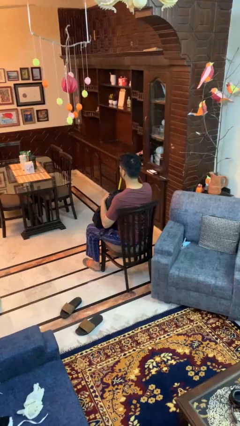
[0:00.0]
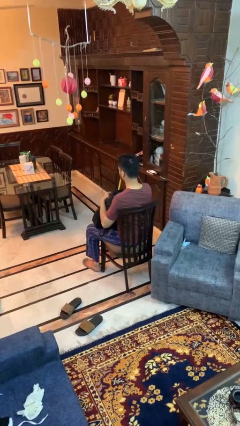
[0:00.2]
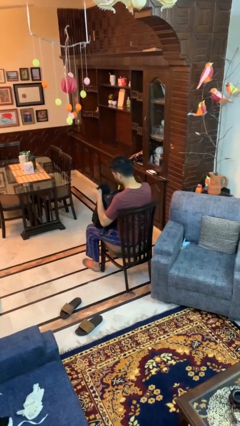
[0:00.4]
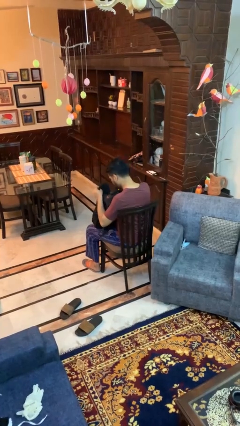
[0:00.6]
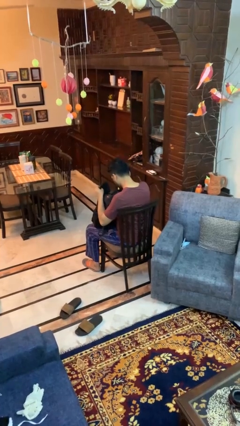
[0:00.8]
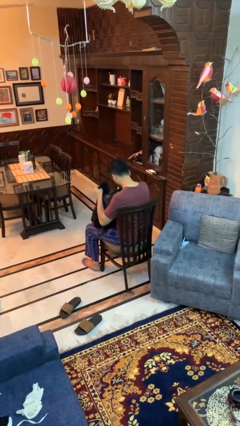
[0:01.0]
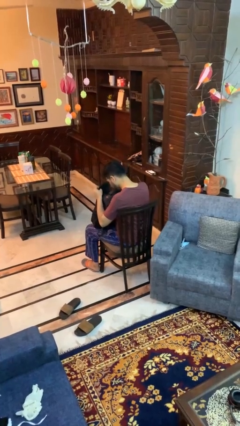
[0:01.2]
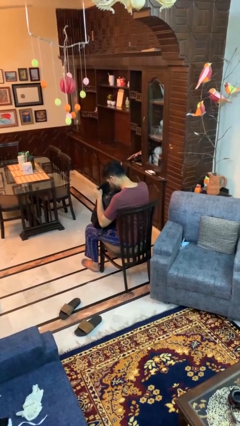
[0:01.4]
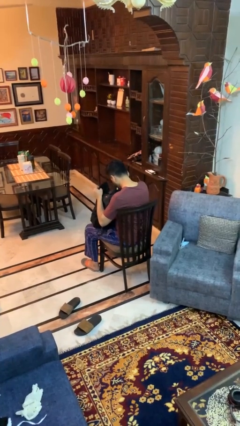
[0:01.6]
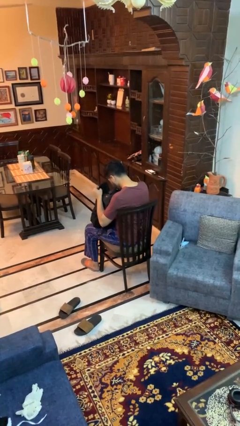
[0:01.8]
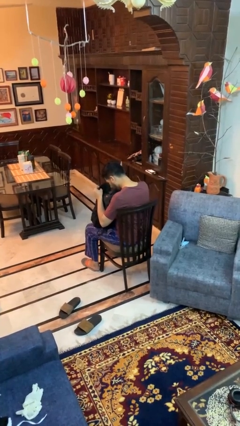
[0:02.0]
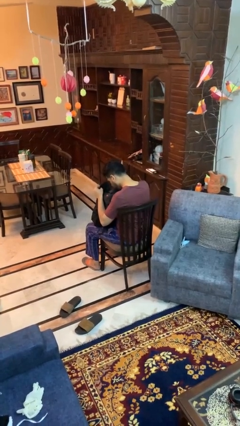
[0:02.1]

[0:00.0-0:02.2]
person searches in backpack

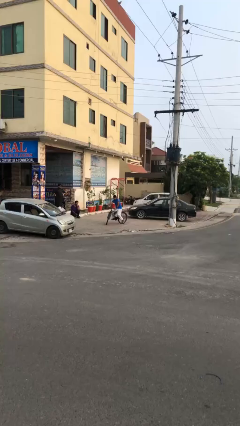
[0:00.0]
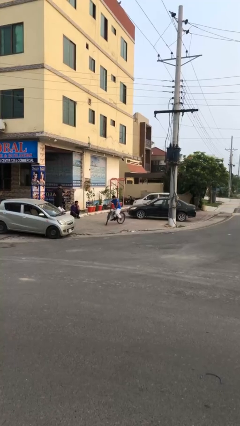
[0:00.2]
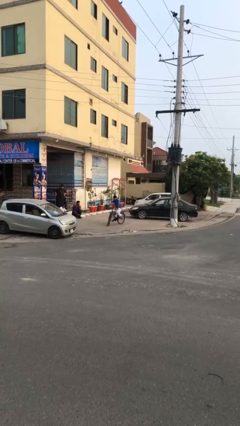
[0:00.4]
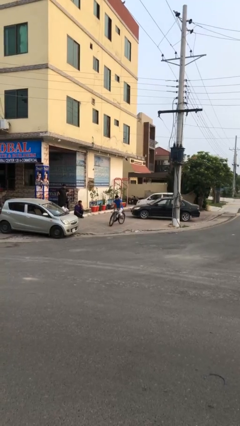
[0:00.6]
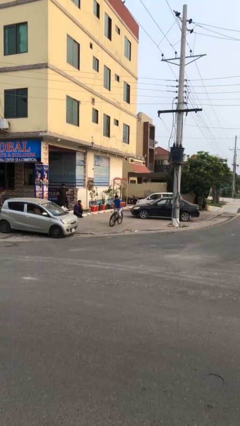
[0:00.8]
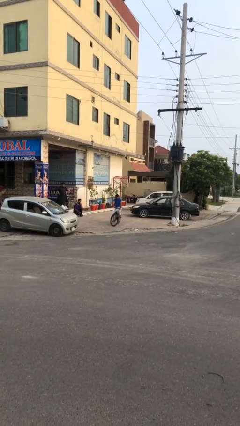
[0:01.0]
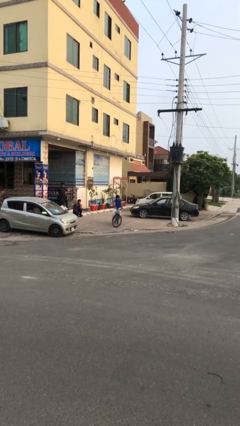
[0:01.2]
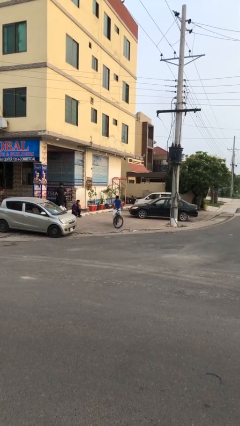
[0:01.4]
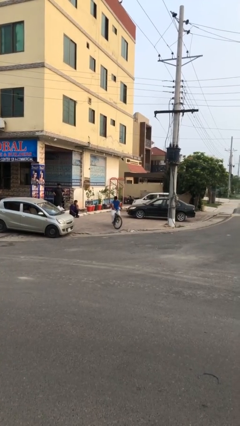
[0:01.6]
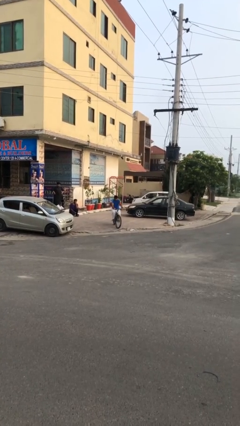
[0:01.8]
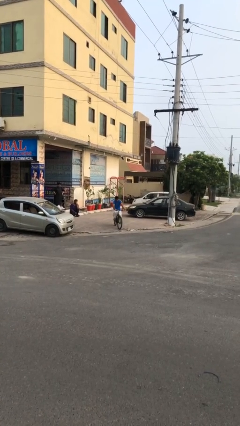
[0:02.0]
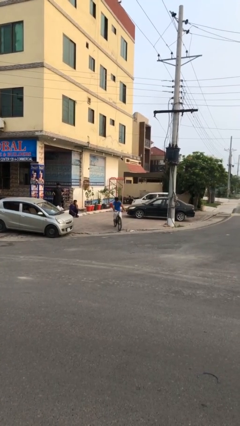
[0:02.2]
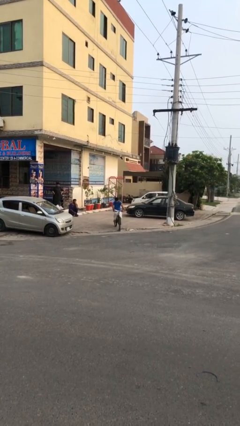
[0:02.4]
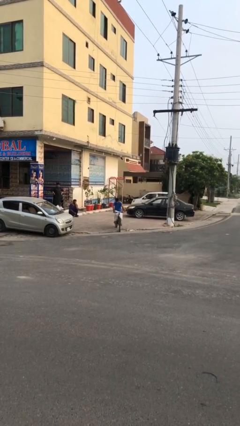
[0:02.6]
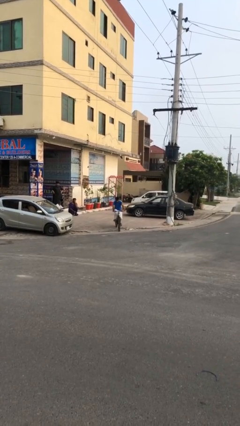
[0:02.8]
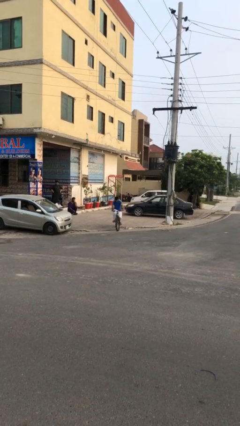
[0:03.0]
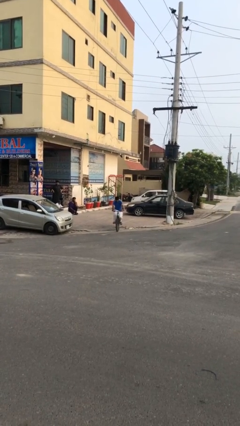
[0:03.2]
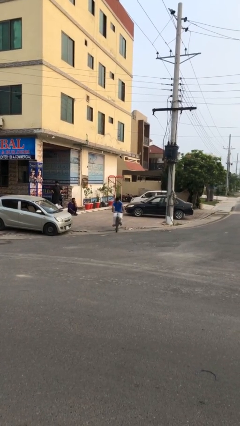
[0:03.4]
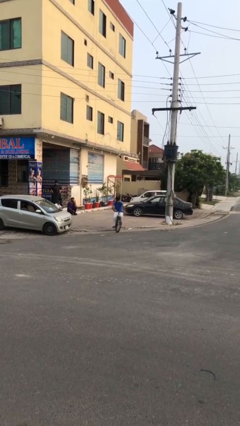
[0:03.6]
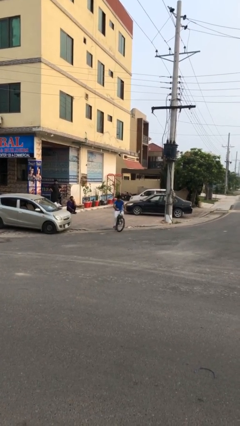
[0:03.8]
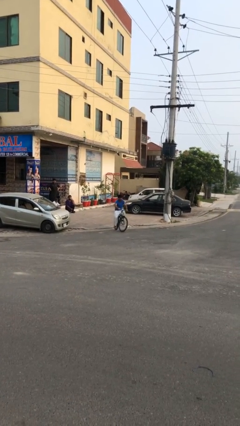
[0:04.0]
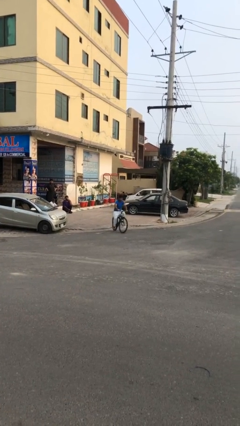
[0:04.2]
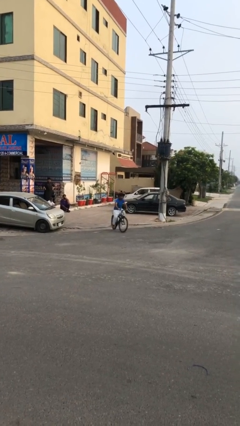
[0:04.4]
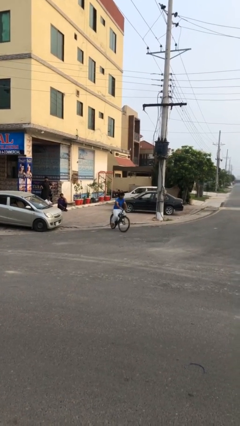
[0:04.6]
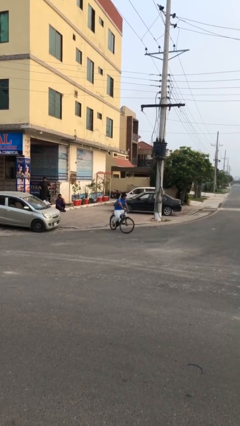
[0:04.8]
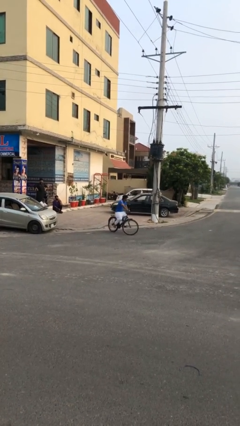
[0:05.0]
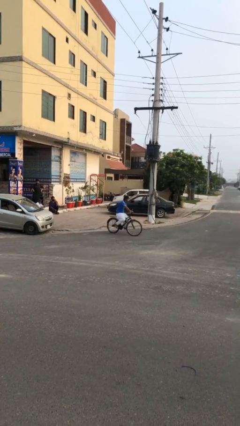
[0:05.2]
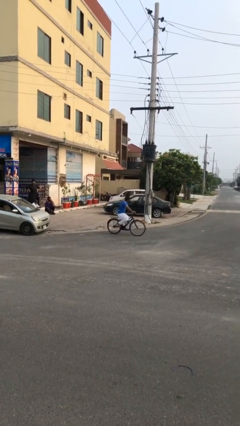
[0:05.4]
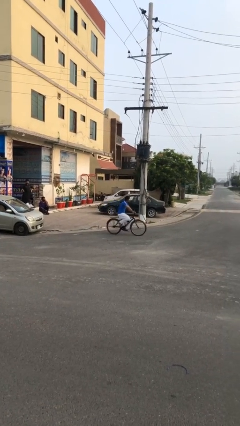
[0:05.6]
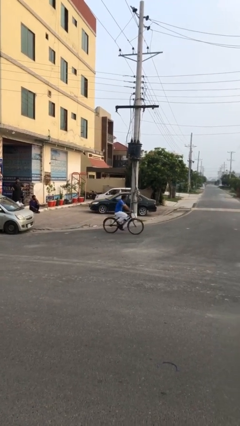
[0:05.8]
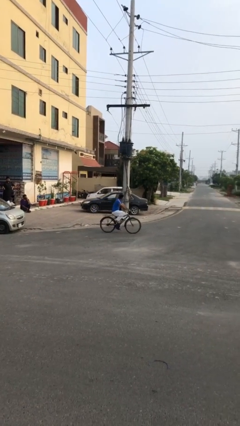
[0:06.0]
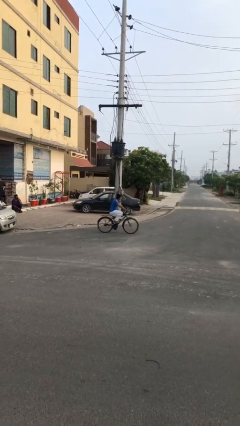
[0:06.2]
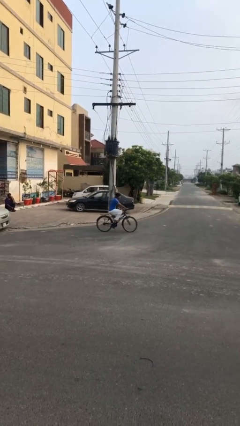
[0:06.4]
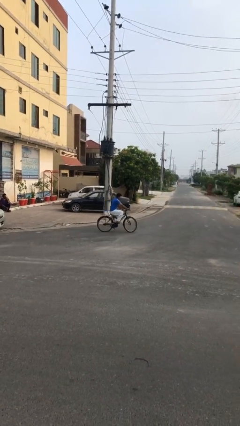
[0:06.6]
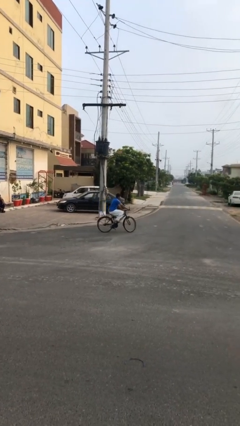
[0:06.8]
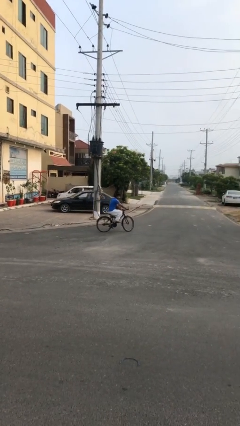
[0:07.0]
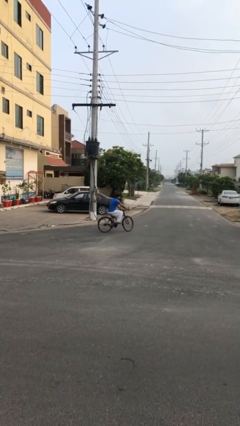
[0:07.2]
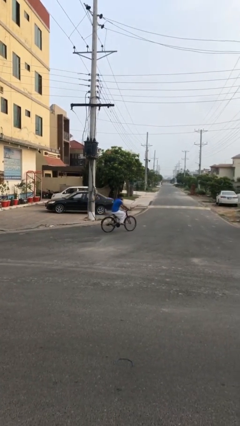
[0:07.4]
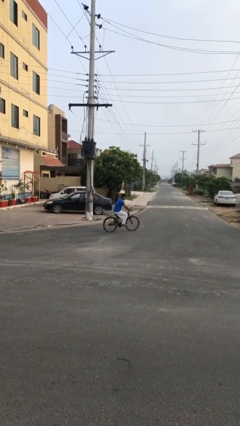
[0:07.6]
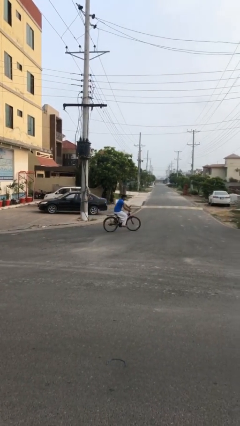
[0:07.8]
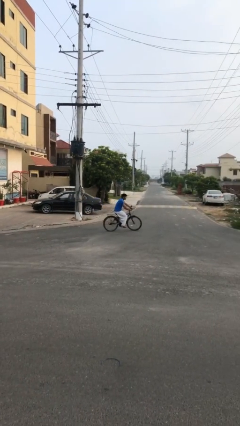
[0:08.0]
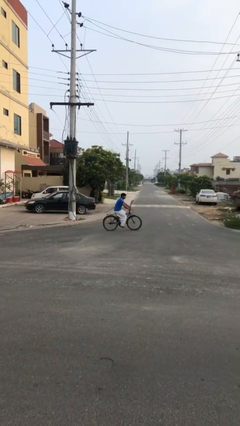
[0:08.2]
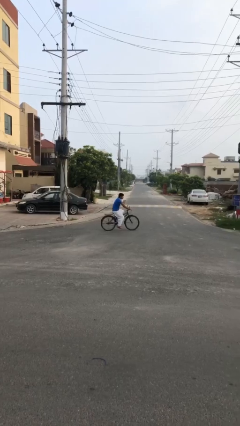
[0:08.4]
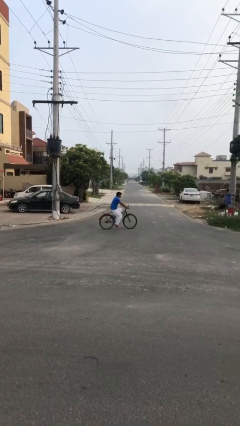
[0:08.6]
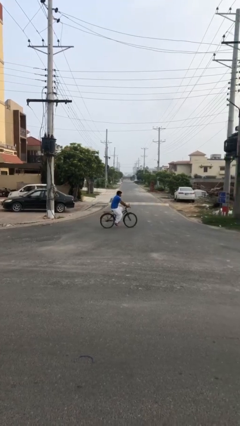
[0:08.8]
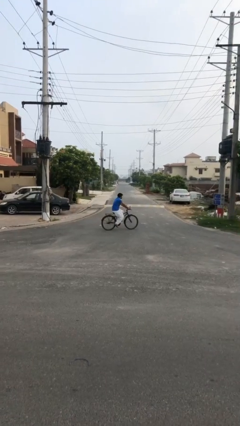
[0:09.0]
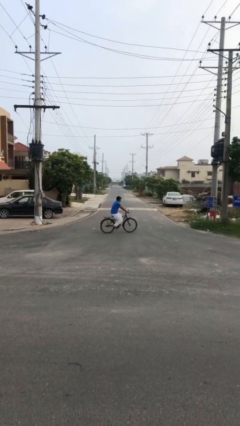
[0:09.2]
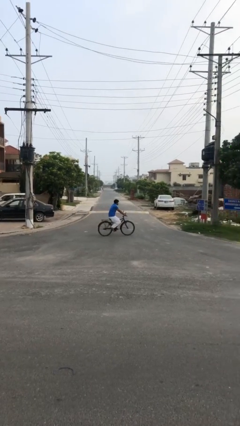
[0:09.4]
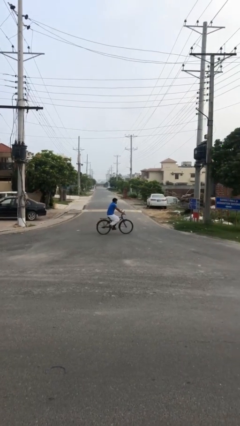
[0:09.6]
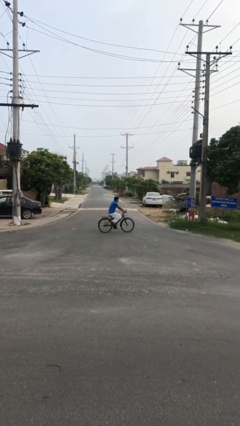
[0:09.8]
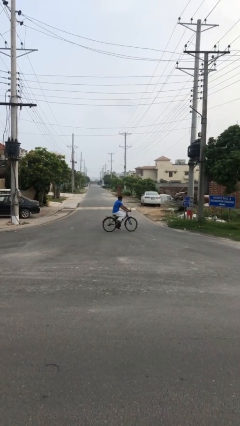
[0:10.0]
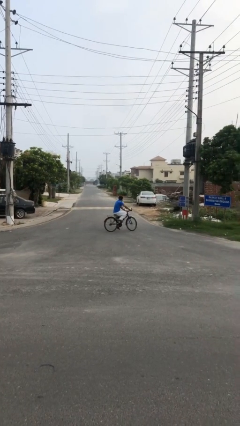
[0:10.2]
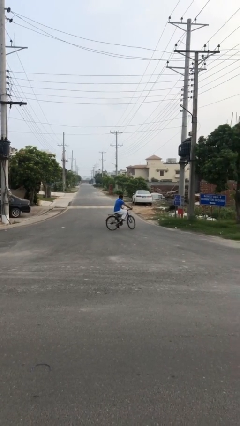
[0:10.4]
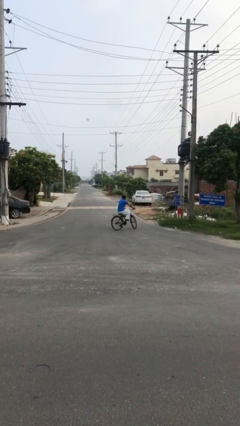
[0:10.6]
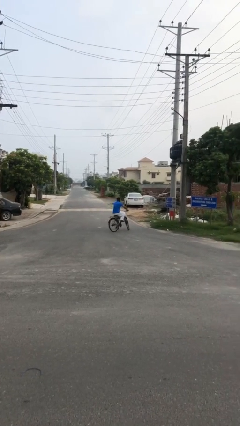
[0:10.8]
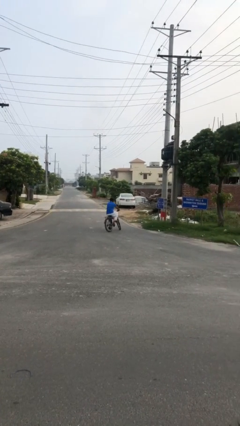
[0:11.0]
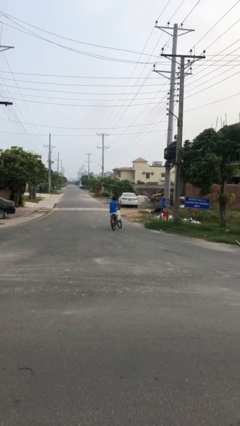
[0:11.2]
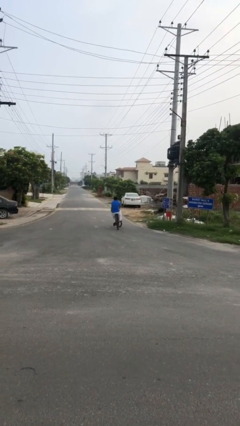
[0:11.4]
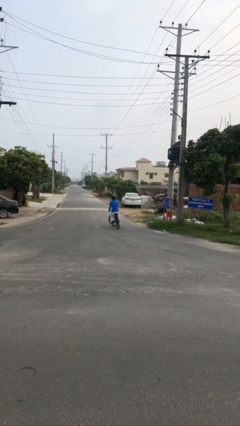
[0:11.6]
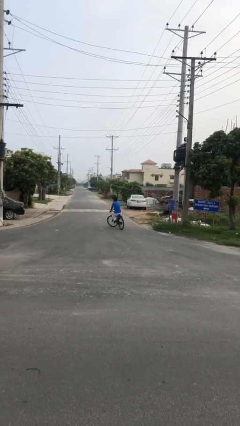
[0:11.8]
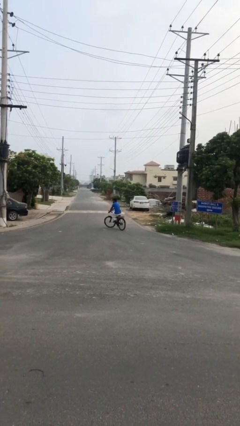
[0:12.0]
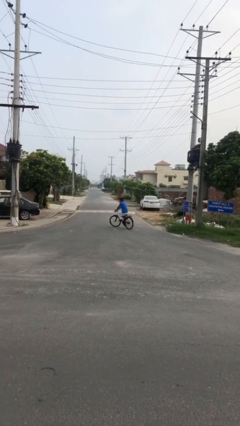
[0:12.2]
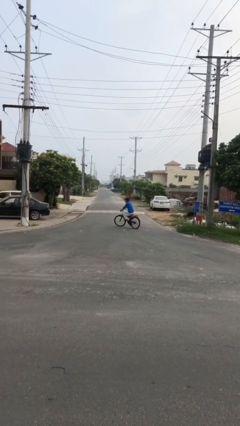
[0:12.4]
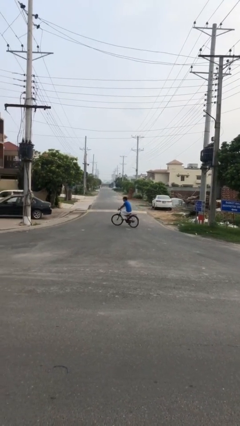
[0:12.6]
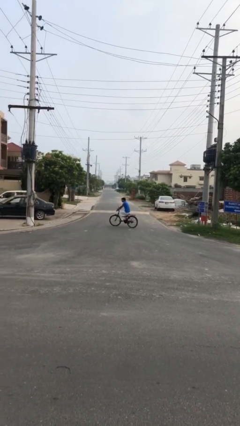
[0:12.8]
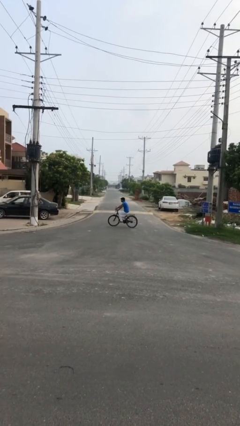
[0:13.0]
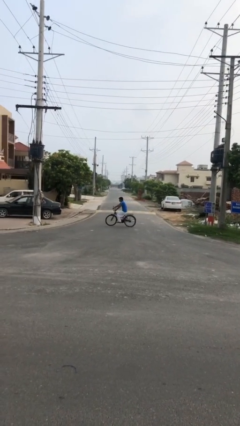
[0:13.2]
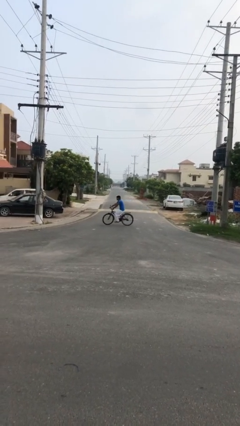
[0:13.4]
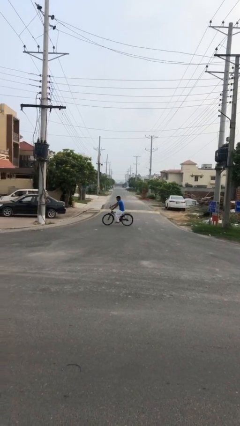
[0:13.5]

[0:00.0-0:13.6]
person rides bicycle

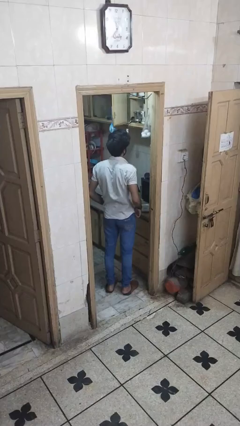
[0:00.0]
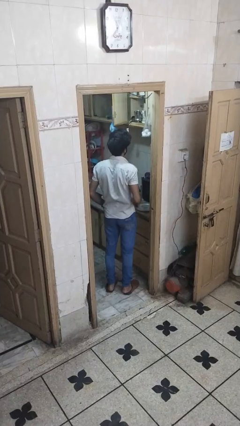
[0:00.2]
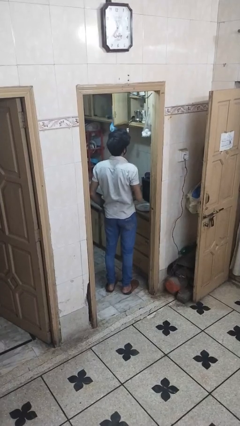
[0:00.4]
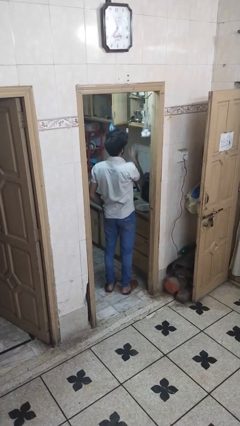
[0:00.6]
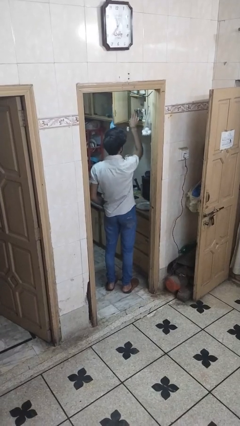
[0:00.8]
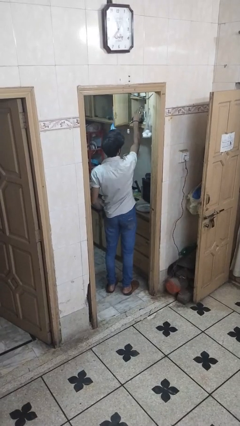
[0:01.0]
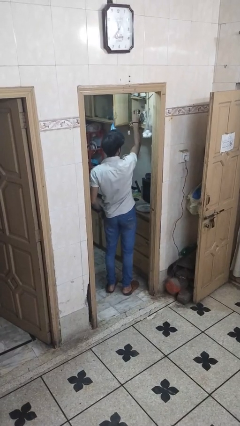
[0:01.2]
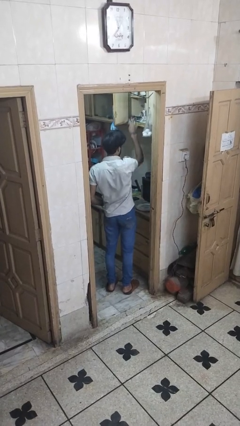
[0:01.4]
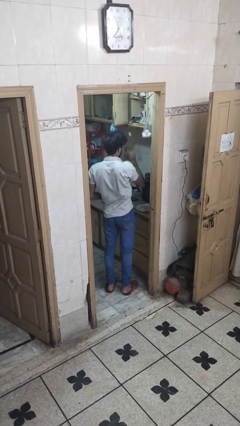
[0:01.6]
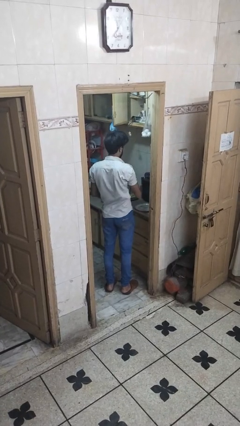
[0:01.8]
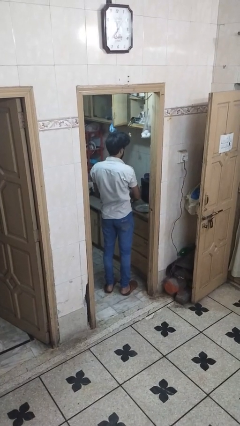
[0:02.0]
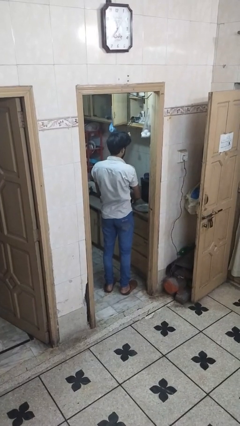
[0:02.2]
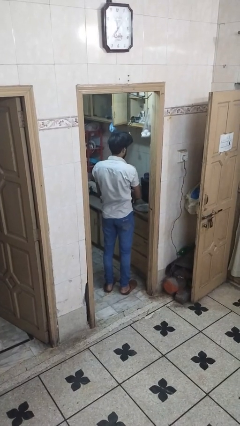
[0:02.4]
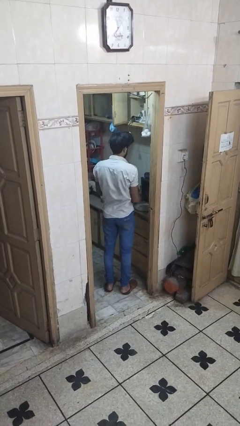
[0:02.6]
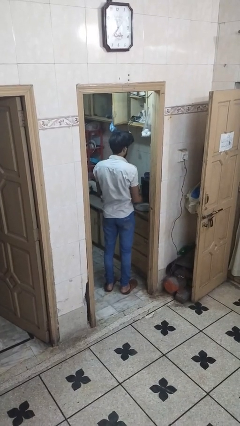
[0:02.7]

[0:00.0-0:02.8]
person takes object from cabinet
